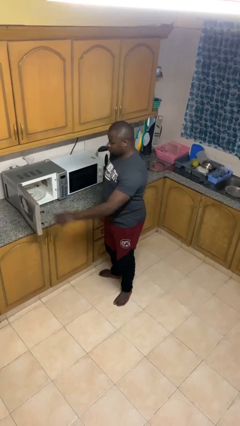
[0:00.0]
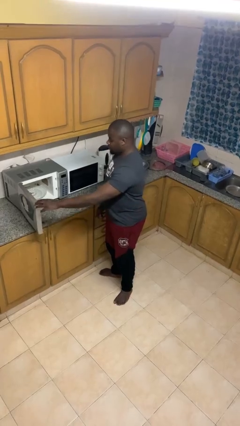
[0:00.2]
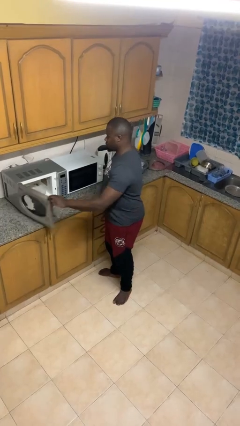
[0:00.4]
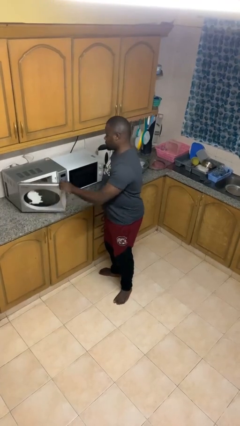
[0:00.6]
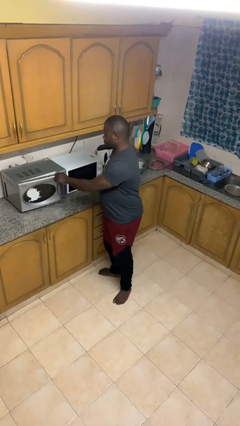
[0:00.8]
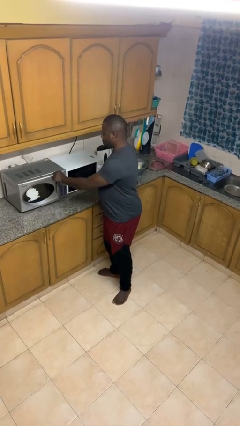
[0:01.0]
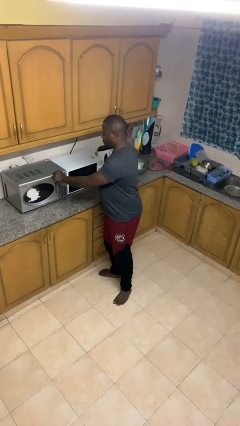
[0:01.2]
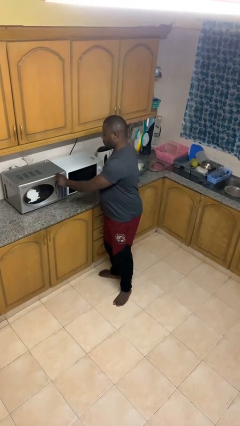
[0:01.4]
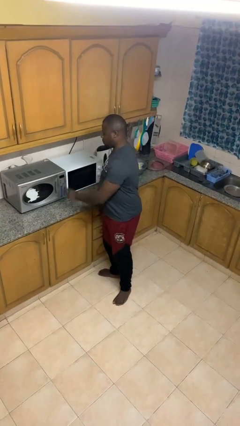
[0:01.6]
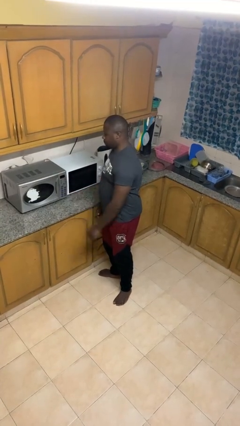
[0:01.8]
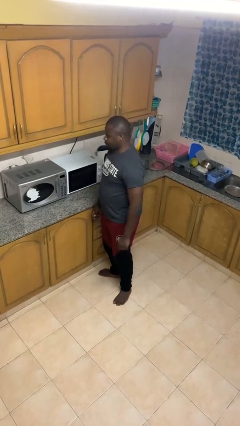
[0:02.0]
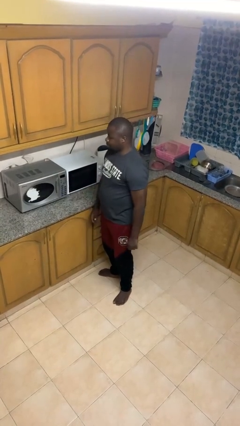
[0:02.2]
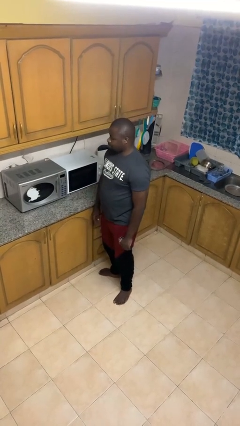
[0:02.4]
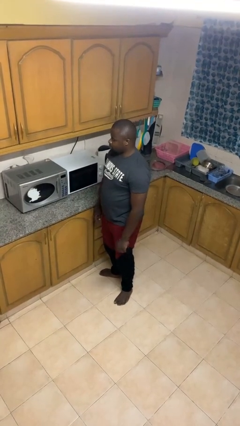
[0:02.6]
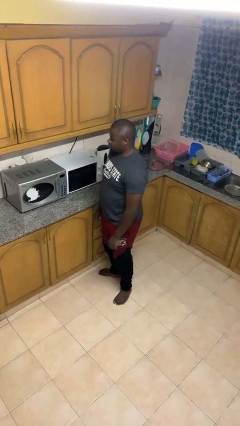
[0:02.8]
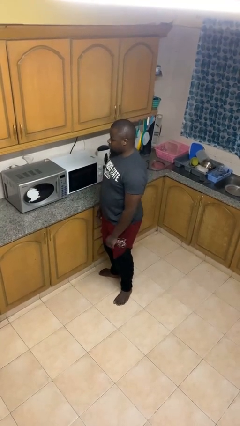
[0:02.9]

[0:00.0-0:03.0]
person closes microwave

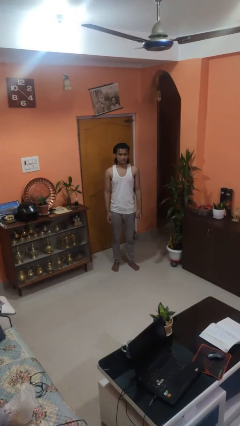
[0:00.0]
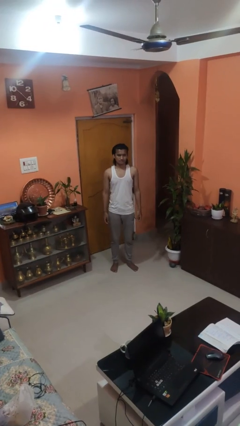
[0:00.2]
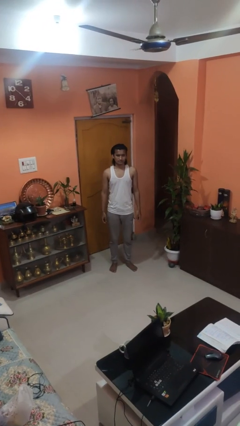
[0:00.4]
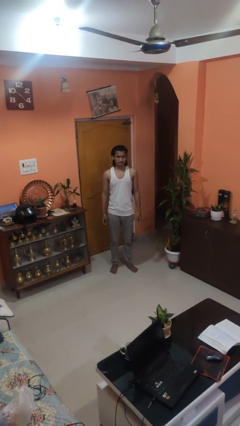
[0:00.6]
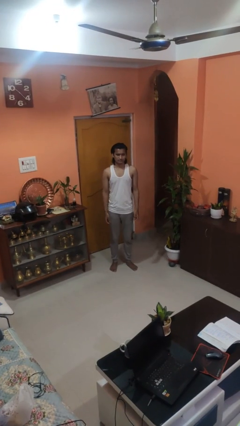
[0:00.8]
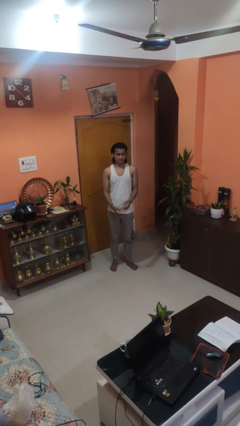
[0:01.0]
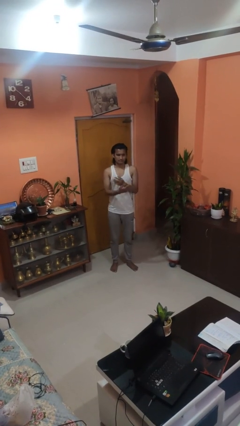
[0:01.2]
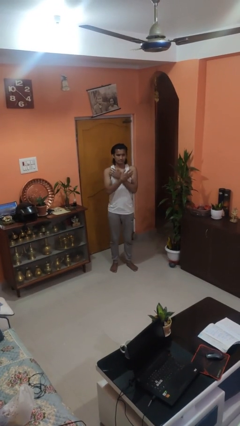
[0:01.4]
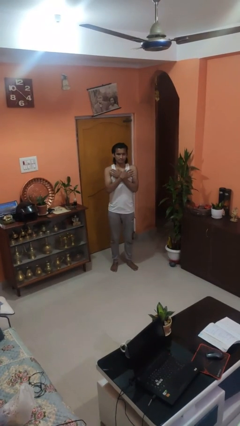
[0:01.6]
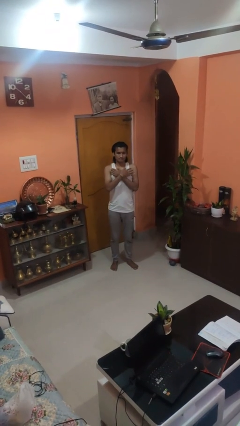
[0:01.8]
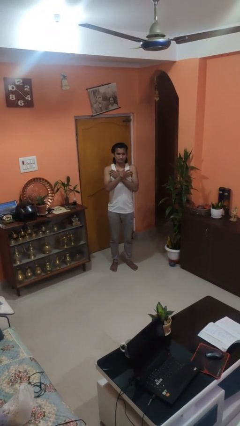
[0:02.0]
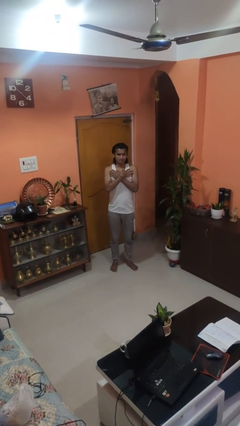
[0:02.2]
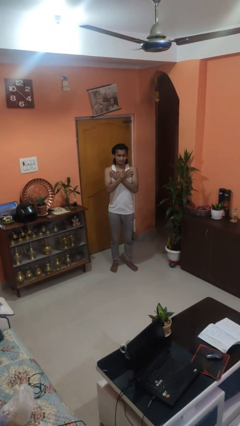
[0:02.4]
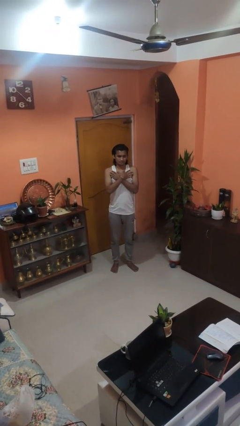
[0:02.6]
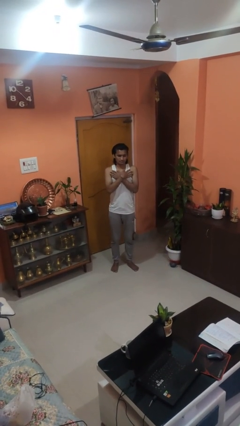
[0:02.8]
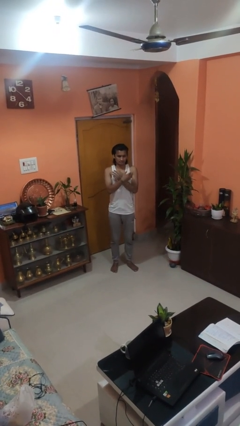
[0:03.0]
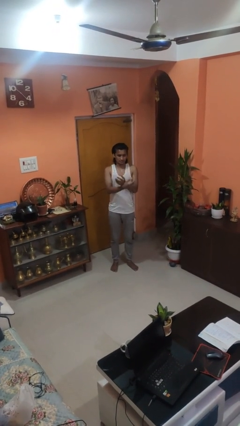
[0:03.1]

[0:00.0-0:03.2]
person drums on chest

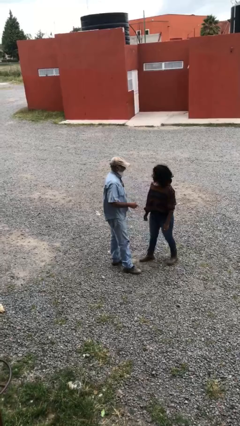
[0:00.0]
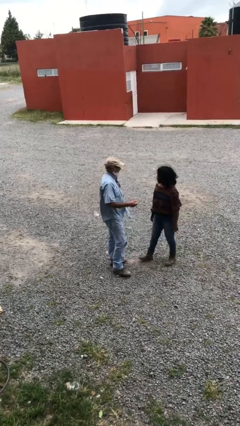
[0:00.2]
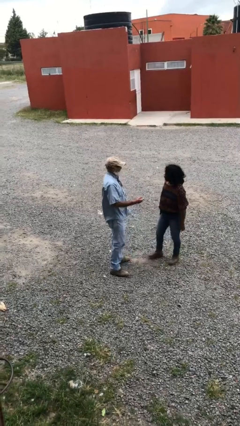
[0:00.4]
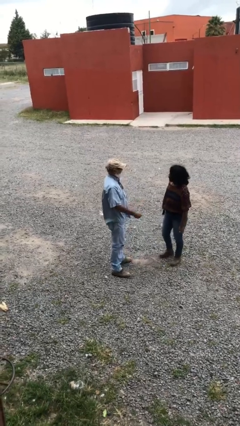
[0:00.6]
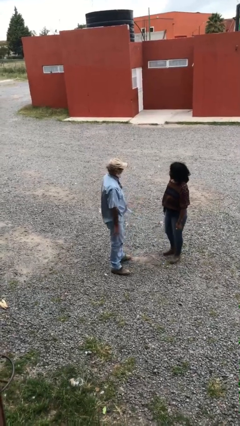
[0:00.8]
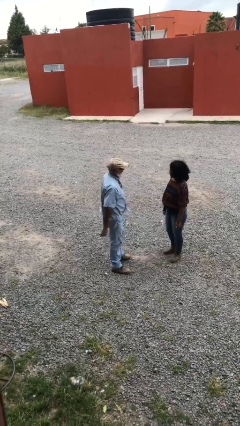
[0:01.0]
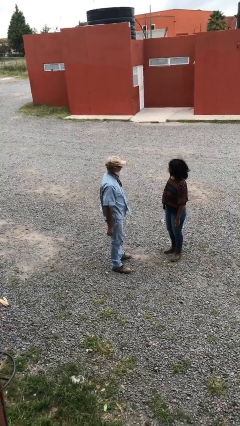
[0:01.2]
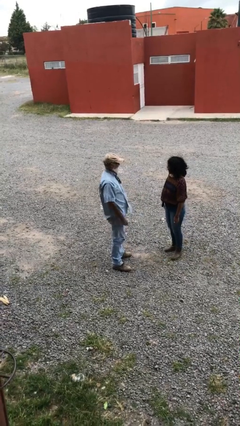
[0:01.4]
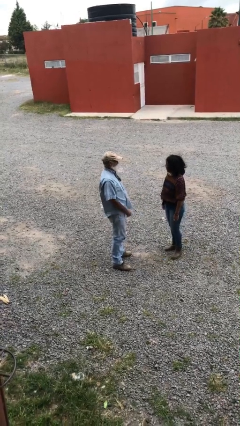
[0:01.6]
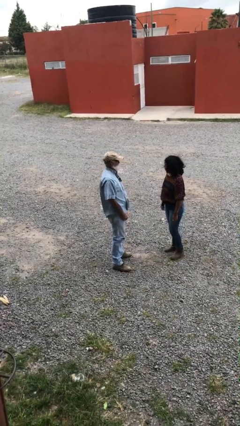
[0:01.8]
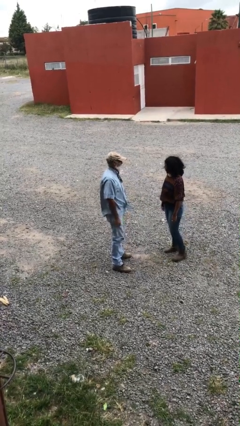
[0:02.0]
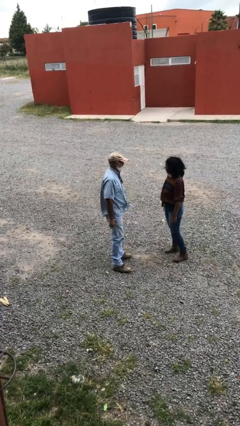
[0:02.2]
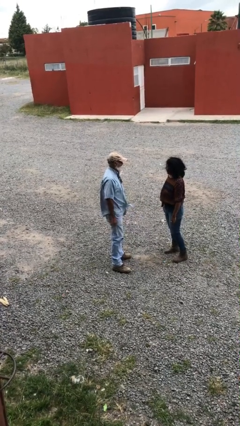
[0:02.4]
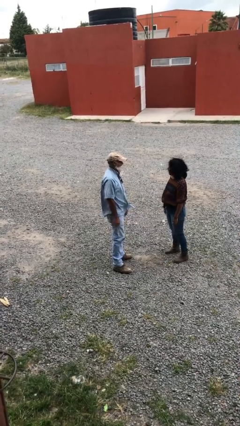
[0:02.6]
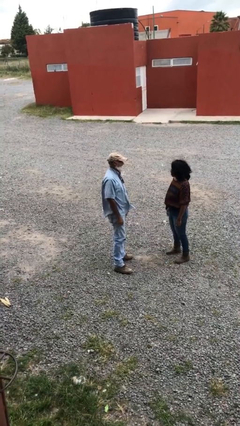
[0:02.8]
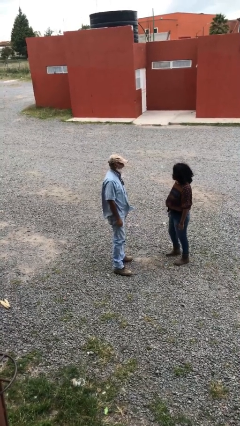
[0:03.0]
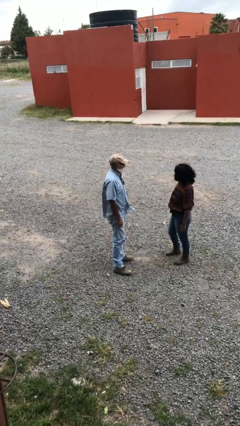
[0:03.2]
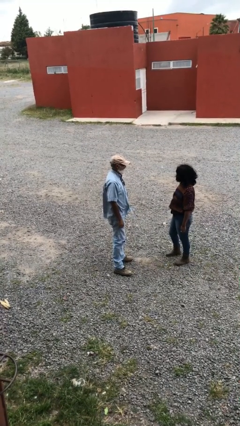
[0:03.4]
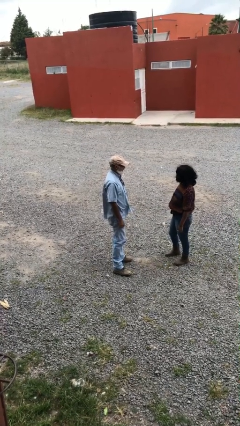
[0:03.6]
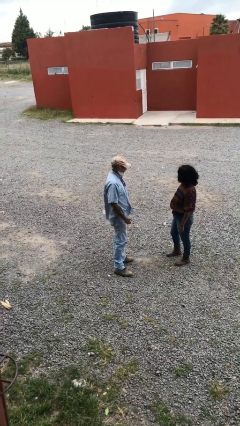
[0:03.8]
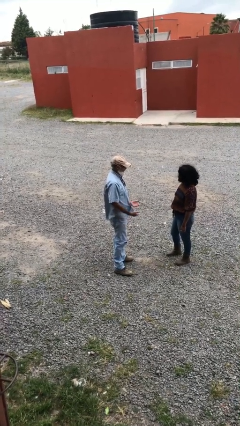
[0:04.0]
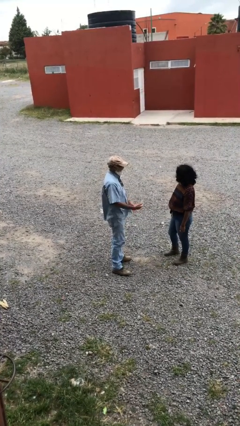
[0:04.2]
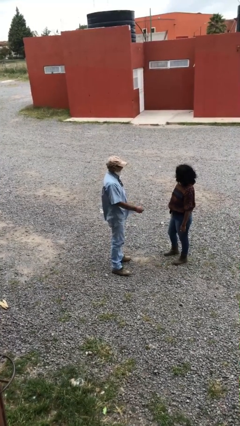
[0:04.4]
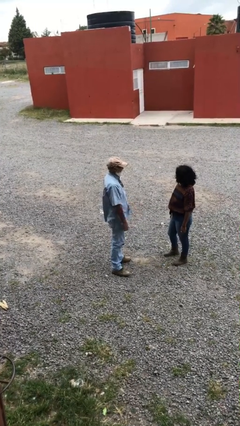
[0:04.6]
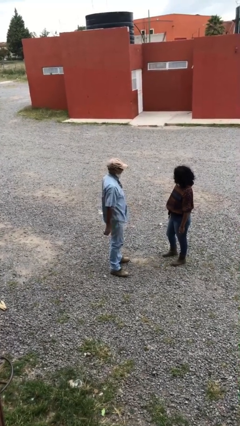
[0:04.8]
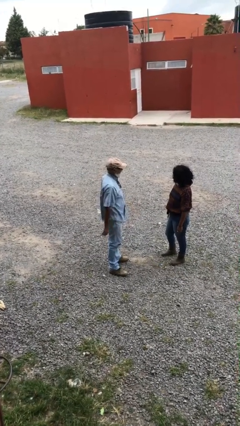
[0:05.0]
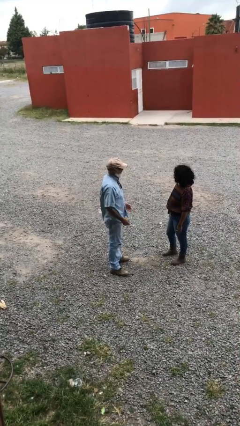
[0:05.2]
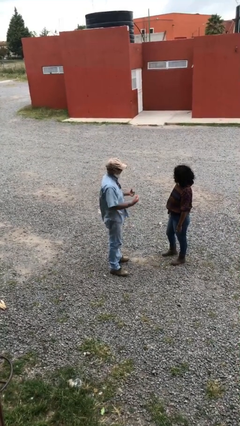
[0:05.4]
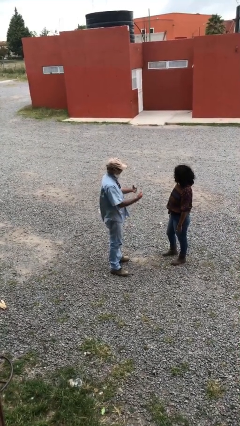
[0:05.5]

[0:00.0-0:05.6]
person talks to person

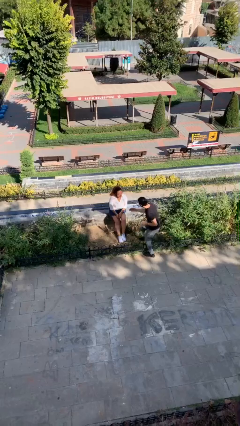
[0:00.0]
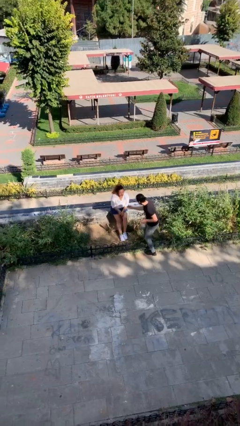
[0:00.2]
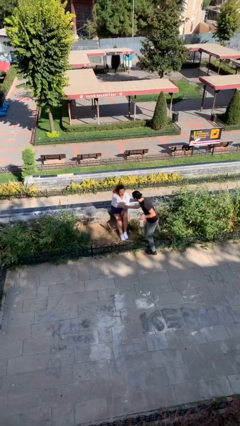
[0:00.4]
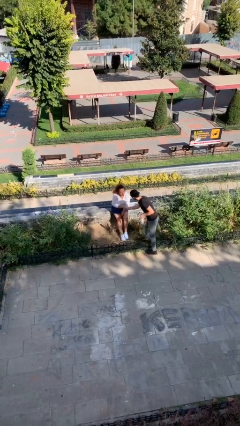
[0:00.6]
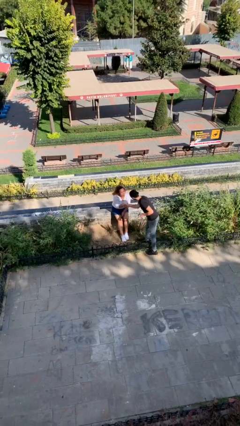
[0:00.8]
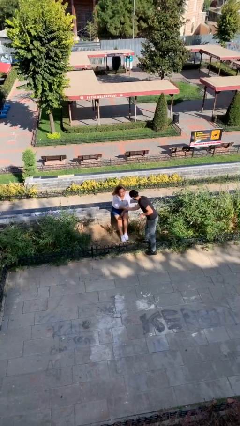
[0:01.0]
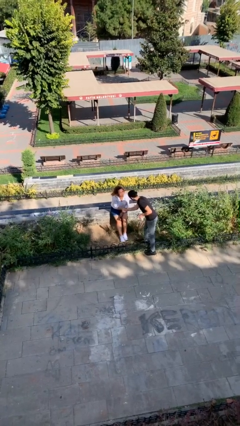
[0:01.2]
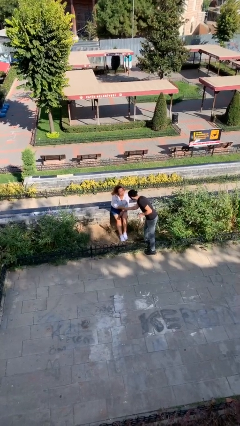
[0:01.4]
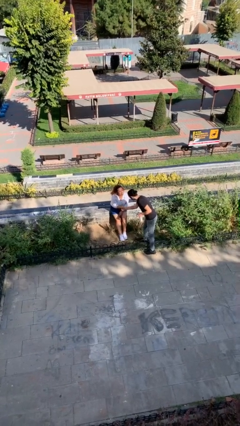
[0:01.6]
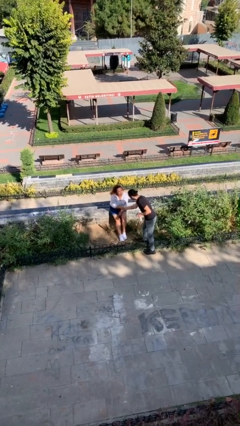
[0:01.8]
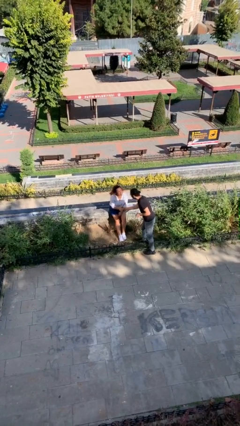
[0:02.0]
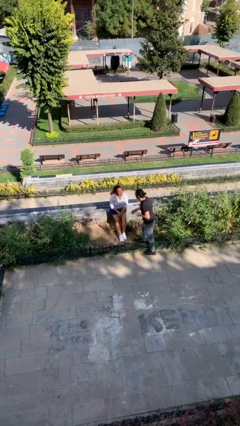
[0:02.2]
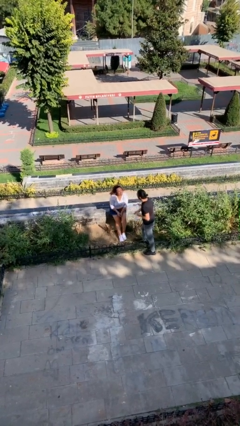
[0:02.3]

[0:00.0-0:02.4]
person shakes hand

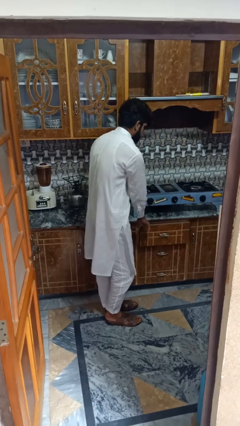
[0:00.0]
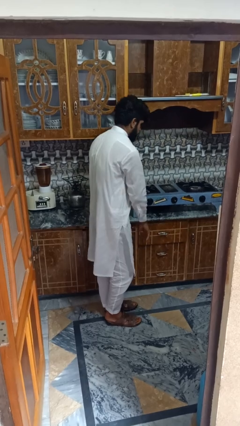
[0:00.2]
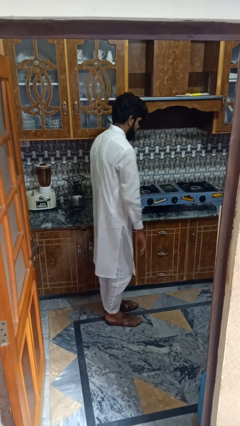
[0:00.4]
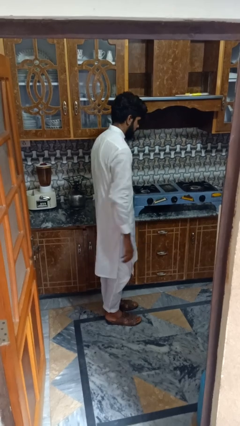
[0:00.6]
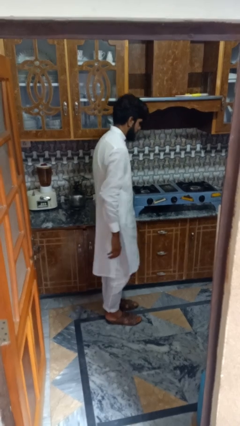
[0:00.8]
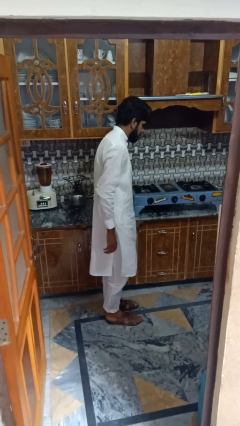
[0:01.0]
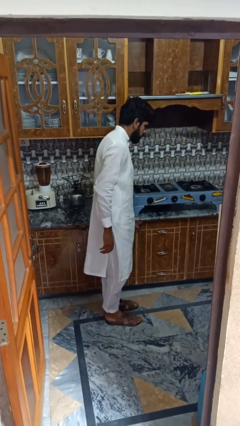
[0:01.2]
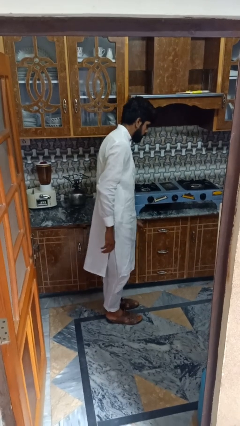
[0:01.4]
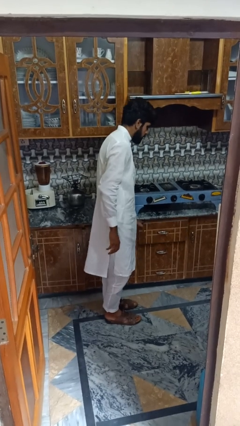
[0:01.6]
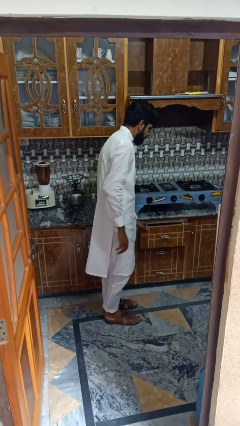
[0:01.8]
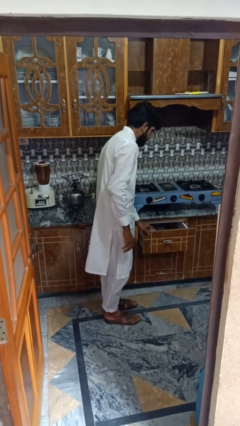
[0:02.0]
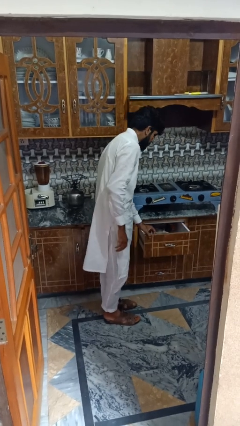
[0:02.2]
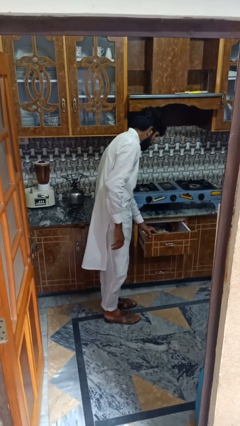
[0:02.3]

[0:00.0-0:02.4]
person searches in kitchen drawer

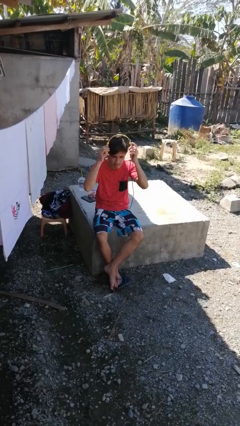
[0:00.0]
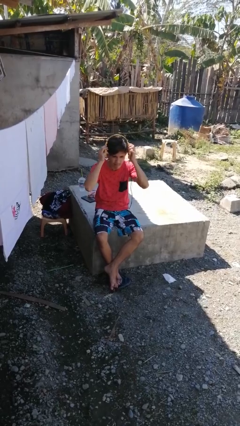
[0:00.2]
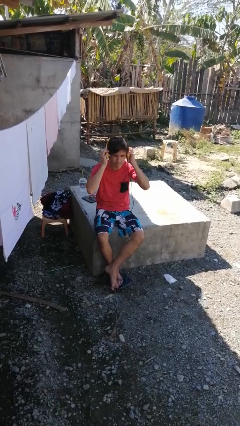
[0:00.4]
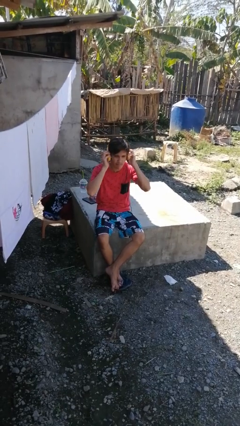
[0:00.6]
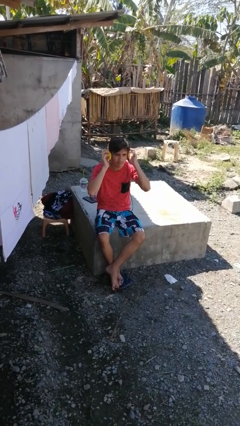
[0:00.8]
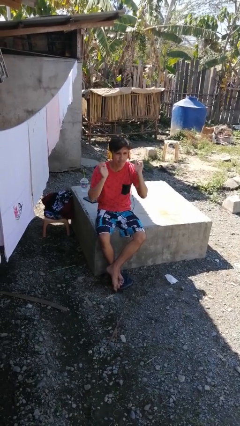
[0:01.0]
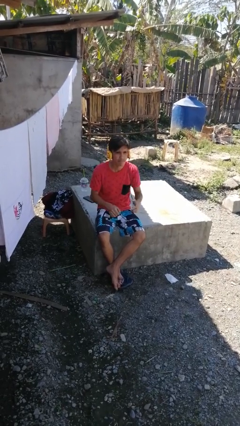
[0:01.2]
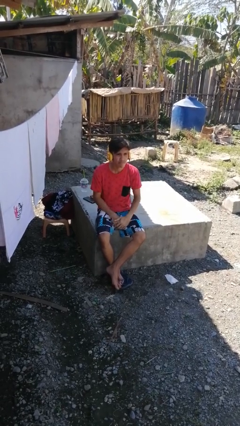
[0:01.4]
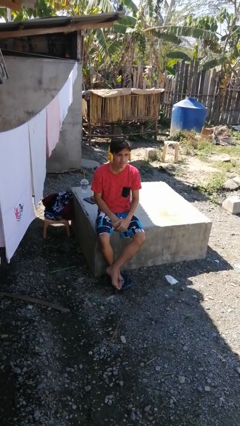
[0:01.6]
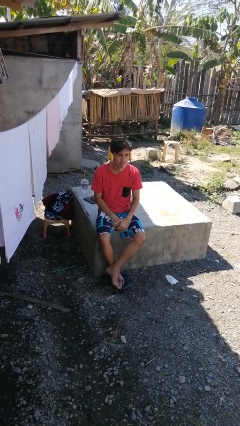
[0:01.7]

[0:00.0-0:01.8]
person puts on headphones
